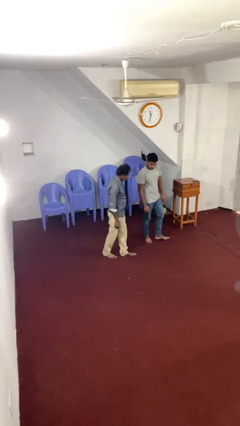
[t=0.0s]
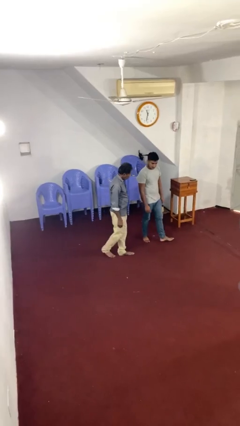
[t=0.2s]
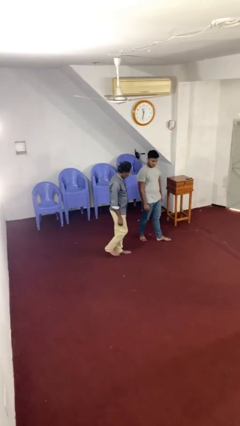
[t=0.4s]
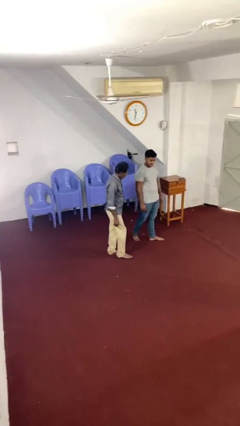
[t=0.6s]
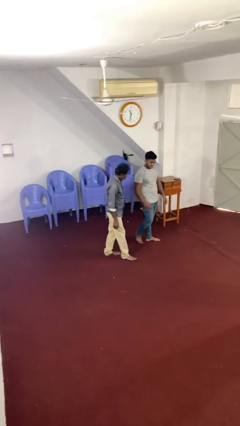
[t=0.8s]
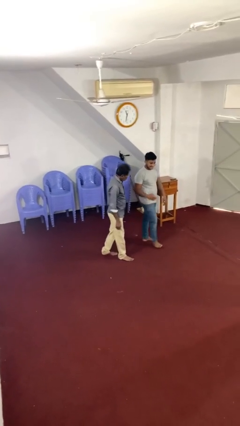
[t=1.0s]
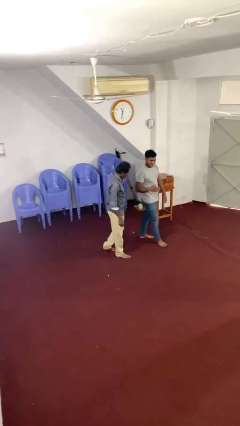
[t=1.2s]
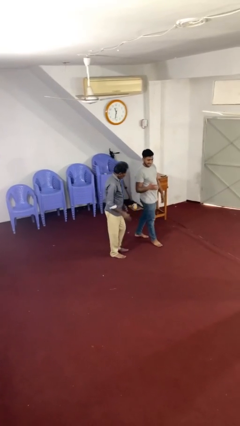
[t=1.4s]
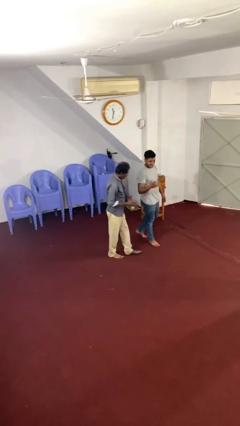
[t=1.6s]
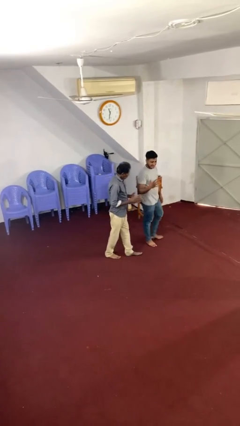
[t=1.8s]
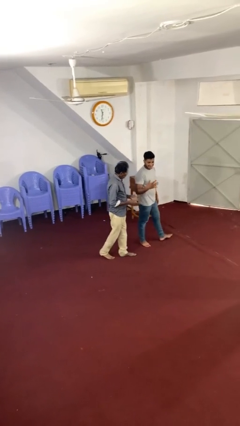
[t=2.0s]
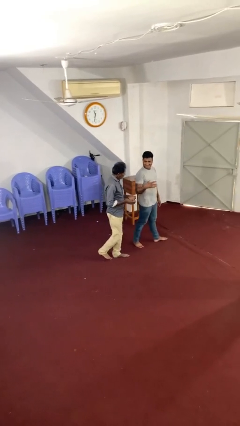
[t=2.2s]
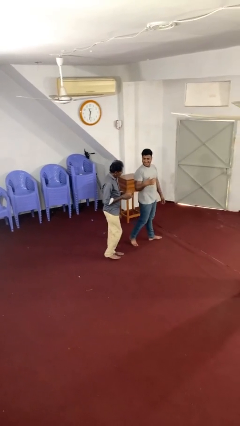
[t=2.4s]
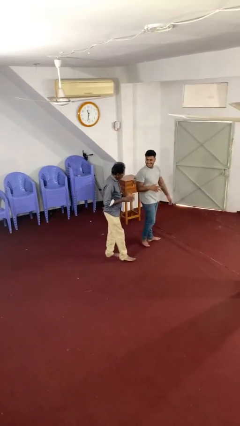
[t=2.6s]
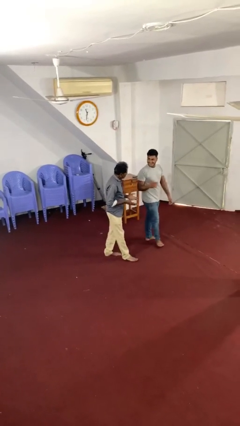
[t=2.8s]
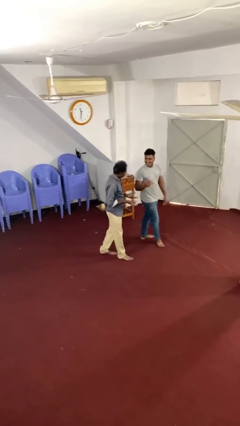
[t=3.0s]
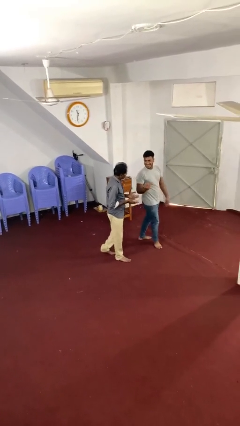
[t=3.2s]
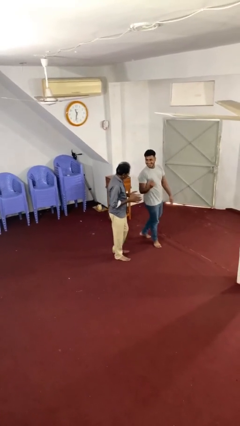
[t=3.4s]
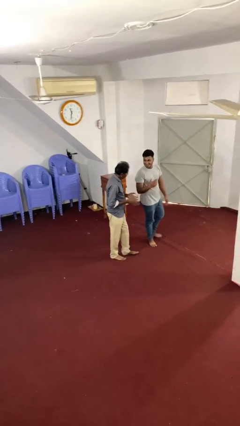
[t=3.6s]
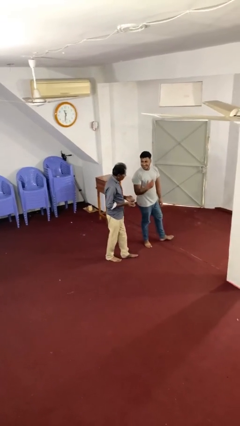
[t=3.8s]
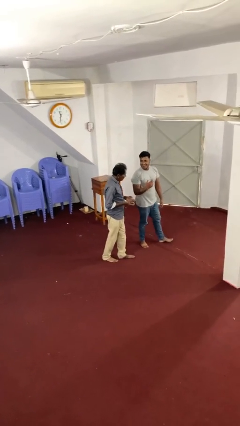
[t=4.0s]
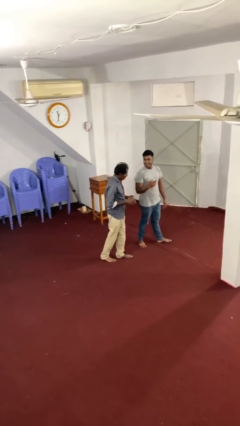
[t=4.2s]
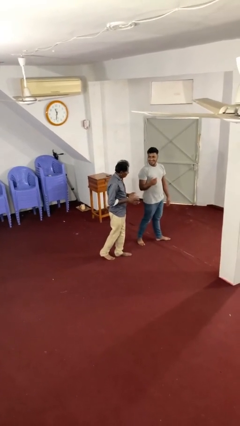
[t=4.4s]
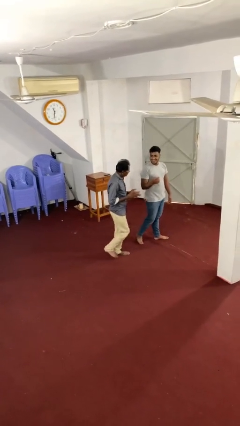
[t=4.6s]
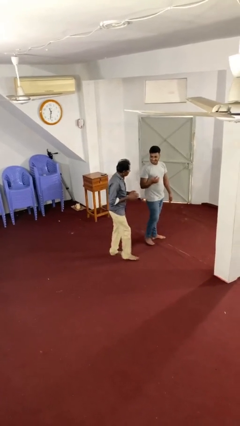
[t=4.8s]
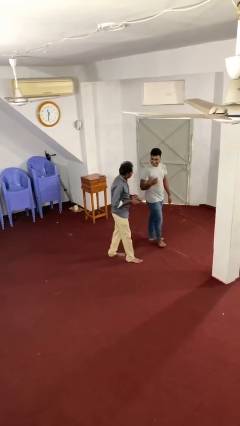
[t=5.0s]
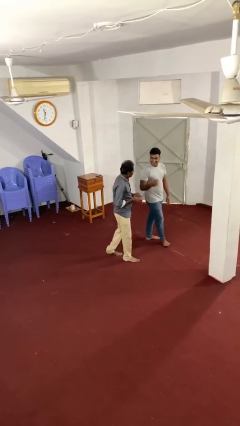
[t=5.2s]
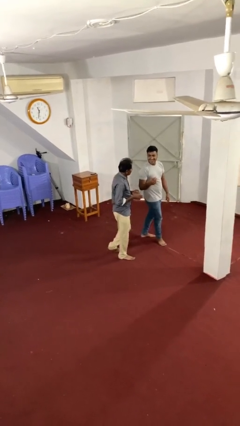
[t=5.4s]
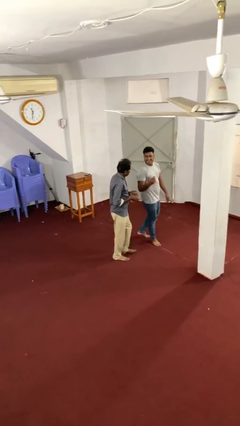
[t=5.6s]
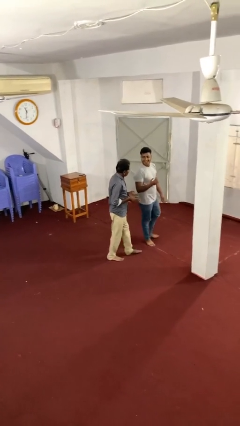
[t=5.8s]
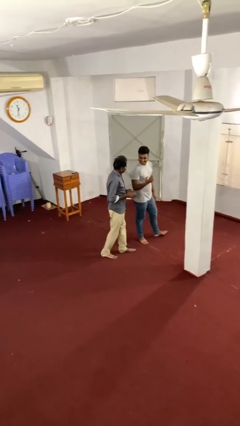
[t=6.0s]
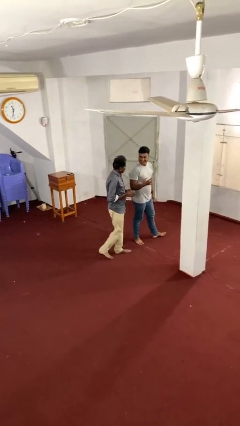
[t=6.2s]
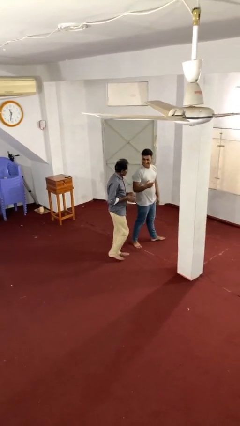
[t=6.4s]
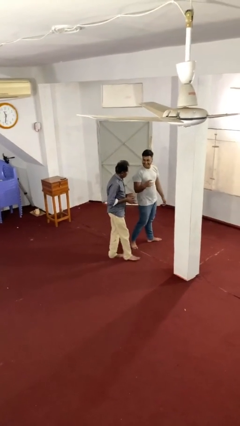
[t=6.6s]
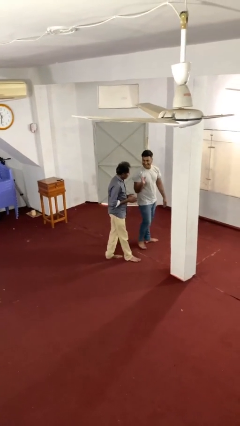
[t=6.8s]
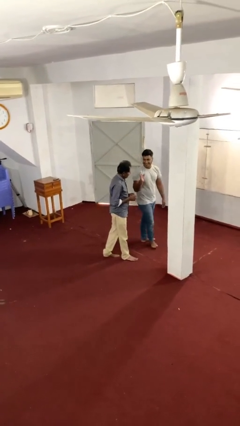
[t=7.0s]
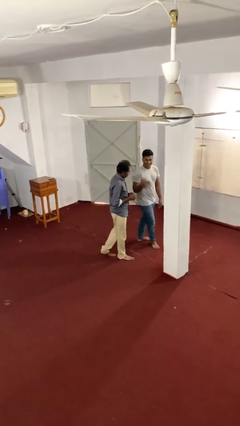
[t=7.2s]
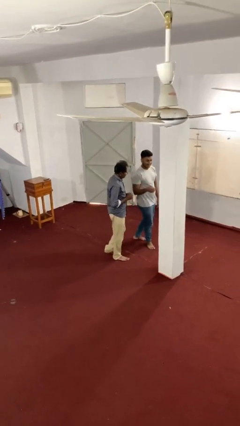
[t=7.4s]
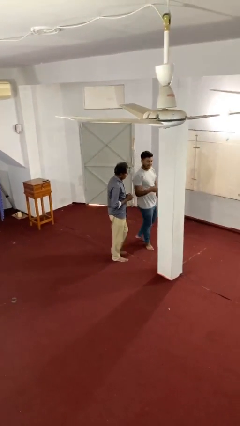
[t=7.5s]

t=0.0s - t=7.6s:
person talks to person

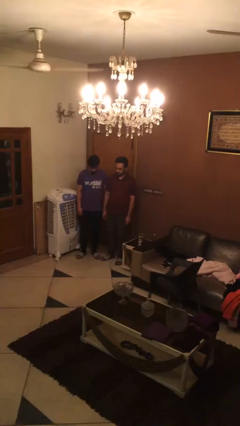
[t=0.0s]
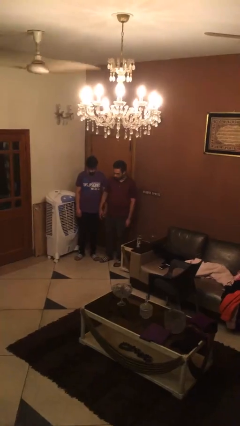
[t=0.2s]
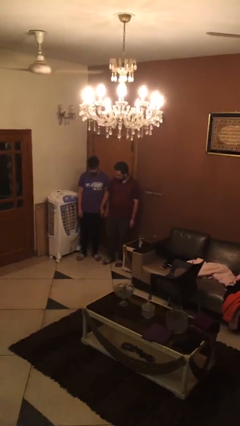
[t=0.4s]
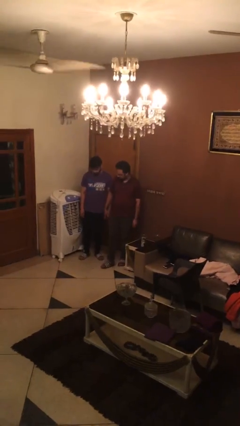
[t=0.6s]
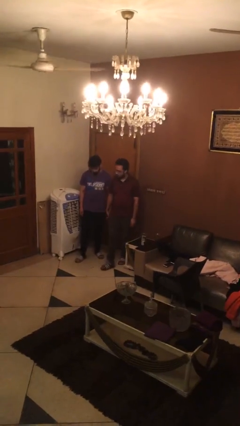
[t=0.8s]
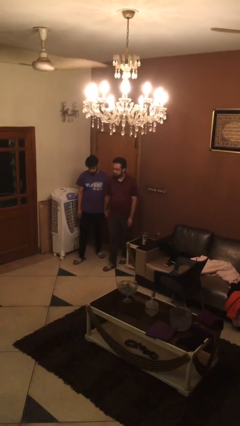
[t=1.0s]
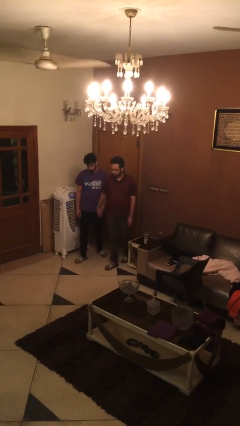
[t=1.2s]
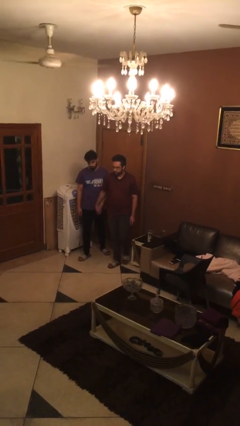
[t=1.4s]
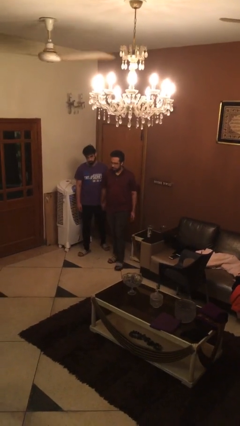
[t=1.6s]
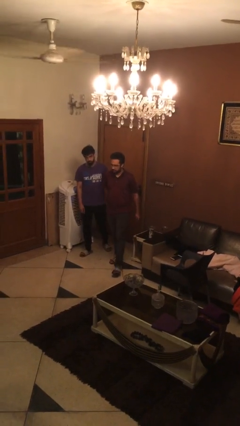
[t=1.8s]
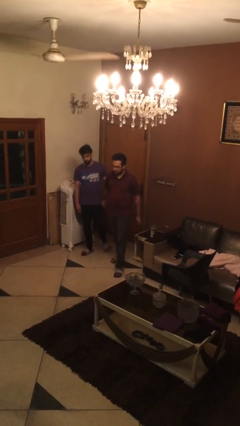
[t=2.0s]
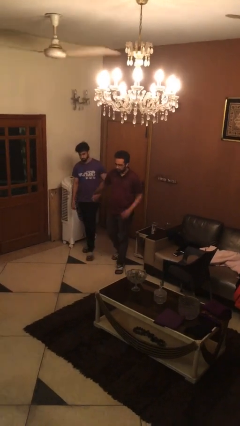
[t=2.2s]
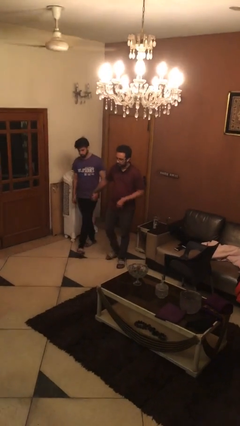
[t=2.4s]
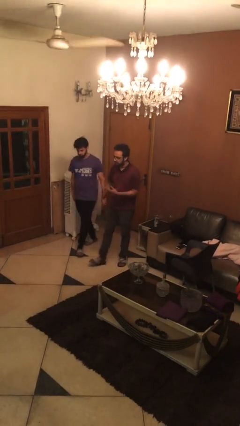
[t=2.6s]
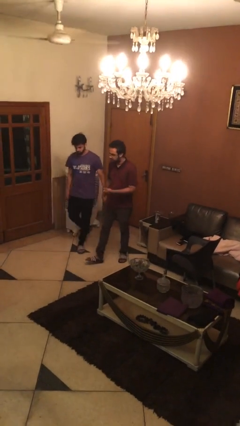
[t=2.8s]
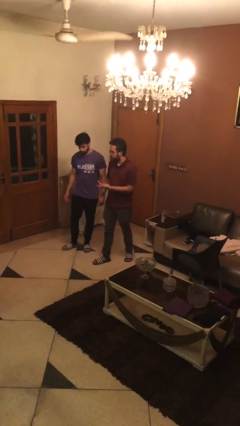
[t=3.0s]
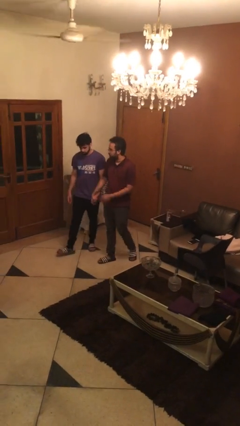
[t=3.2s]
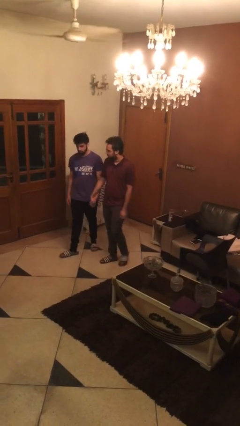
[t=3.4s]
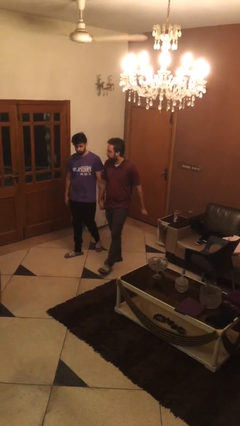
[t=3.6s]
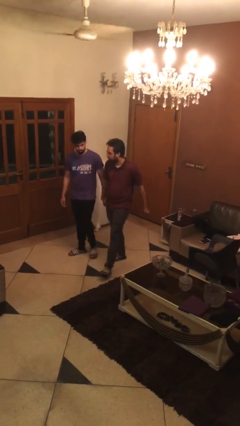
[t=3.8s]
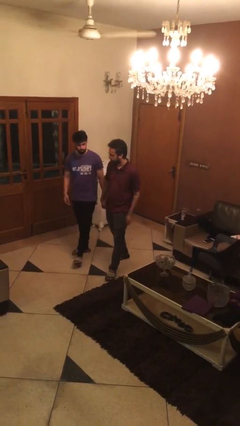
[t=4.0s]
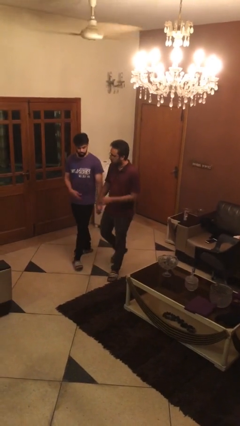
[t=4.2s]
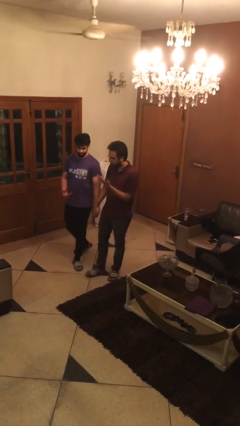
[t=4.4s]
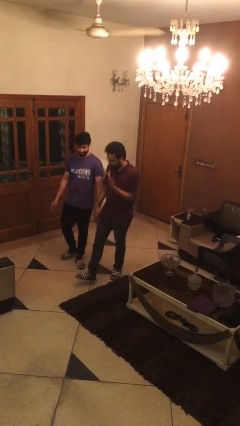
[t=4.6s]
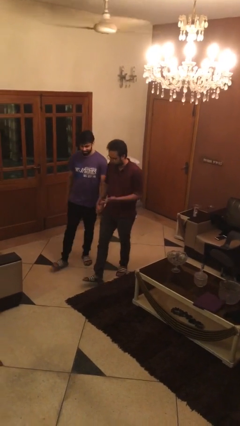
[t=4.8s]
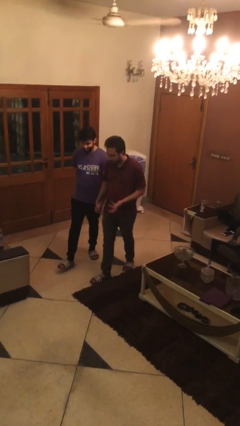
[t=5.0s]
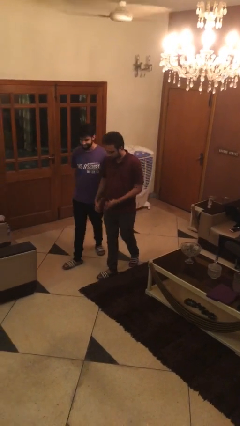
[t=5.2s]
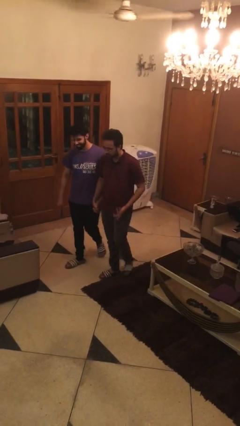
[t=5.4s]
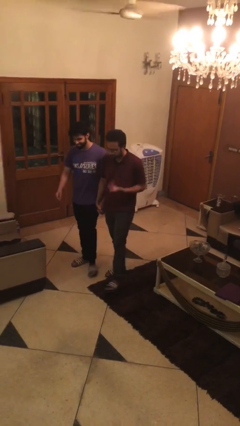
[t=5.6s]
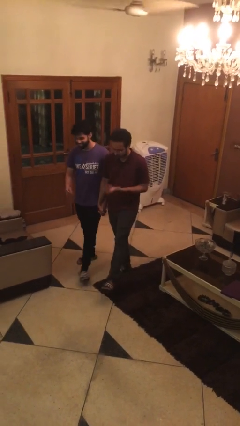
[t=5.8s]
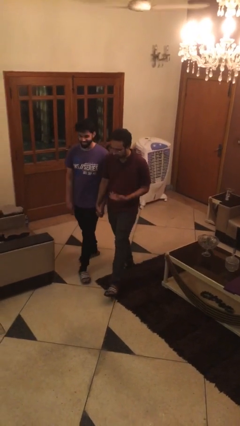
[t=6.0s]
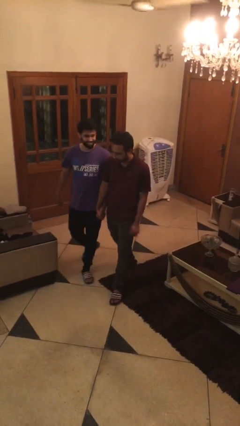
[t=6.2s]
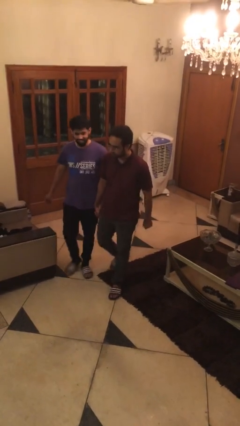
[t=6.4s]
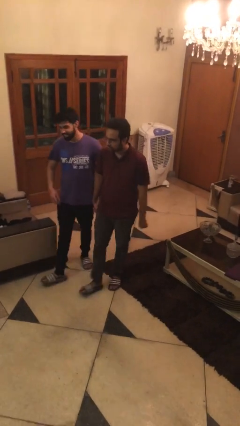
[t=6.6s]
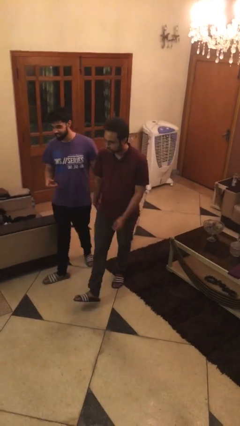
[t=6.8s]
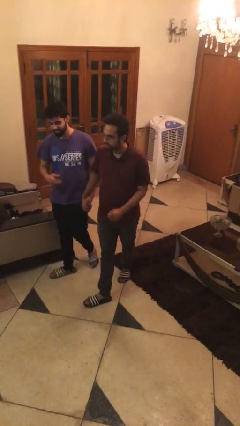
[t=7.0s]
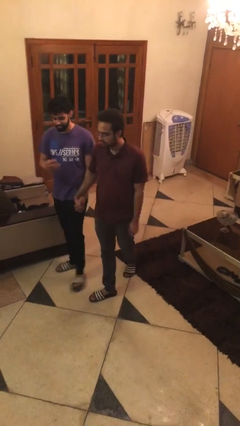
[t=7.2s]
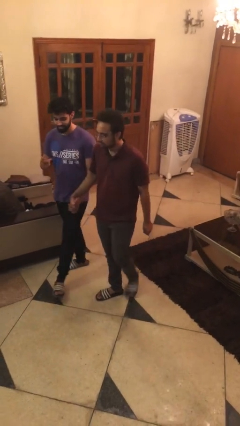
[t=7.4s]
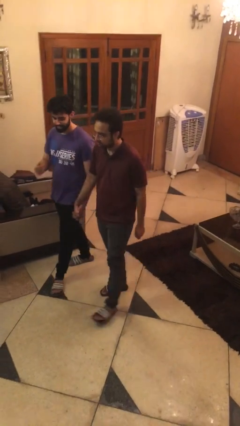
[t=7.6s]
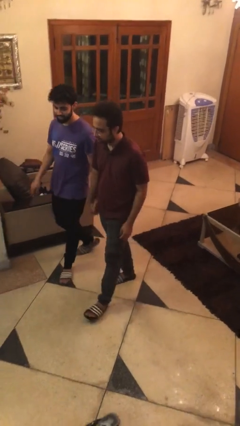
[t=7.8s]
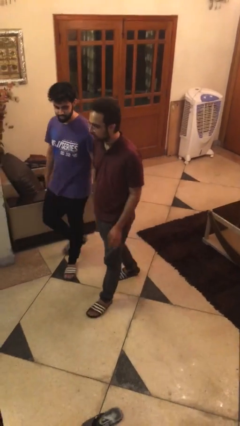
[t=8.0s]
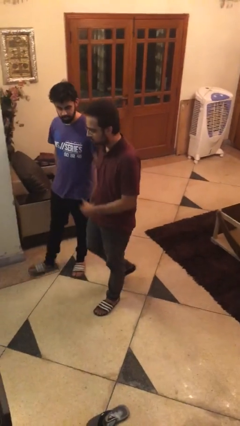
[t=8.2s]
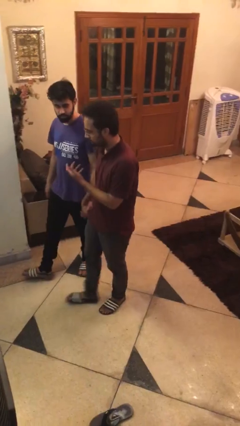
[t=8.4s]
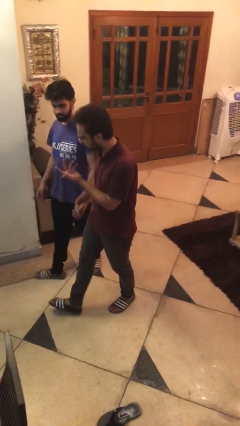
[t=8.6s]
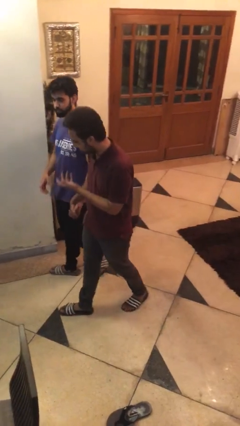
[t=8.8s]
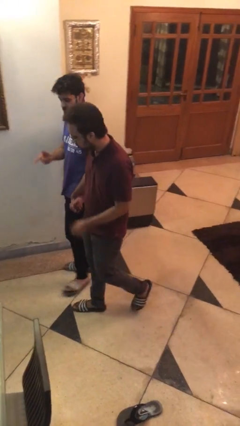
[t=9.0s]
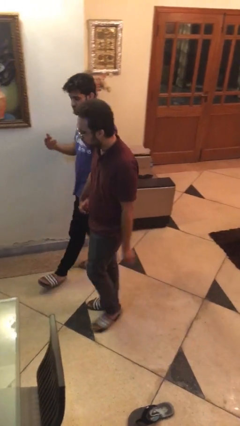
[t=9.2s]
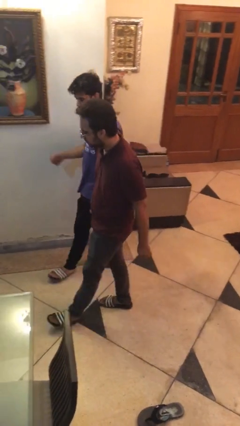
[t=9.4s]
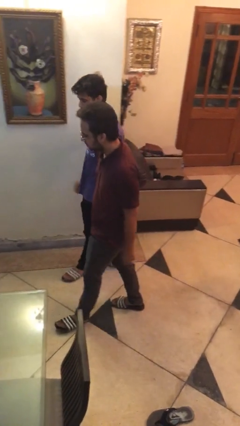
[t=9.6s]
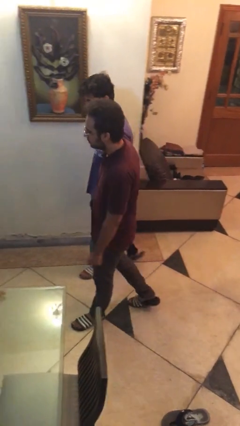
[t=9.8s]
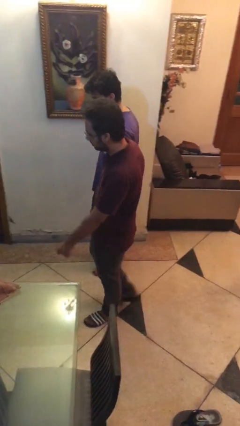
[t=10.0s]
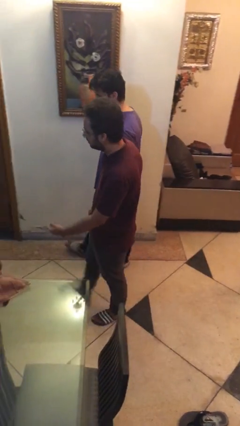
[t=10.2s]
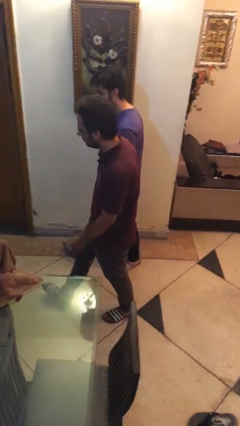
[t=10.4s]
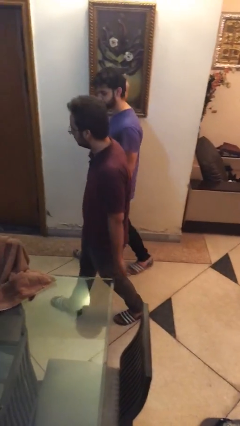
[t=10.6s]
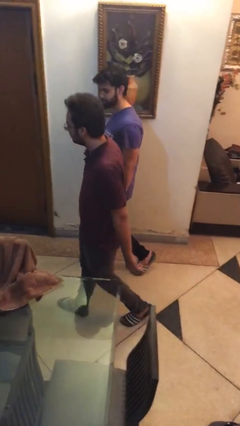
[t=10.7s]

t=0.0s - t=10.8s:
person holds hand
